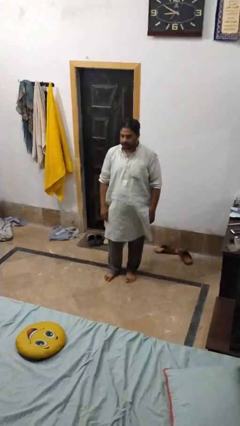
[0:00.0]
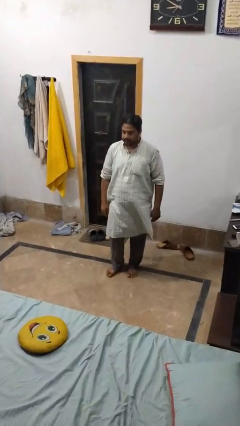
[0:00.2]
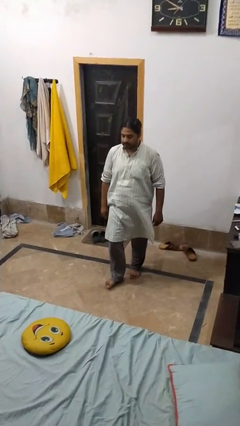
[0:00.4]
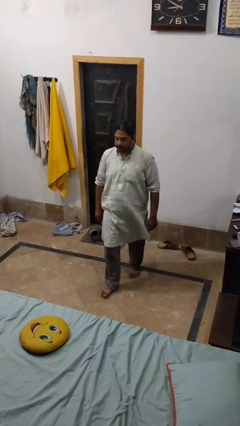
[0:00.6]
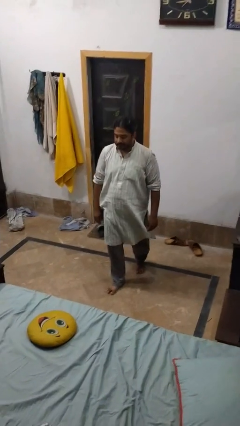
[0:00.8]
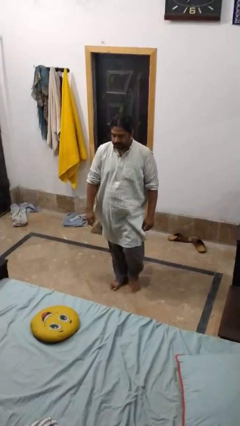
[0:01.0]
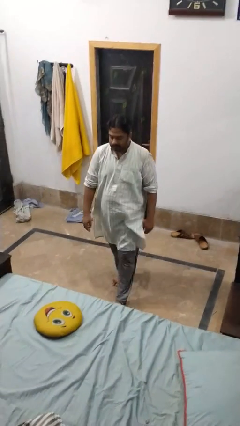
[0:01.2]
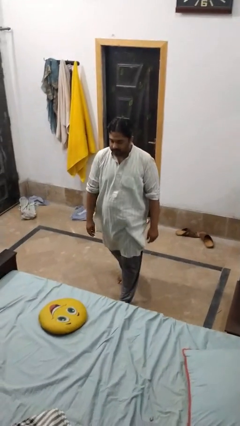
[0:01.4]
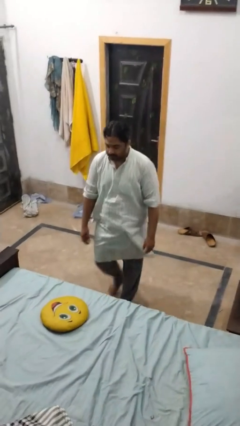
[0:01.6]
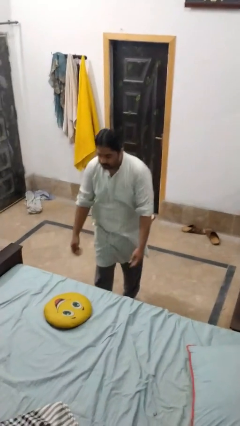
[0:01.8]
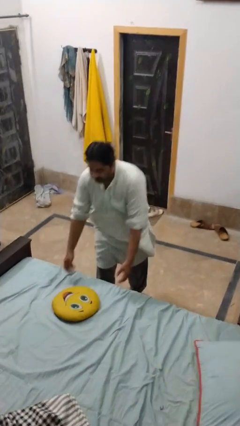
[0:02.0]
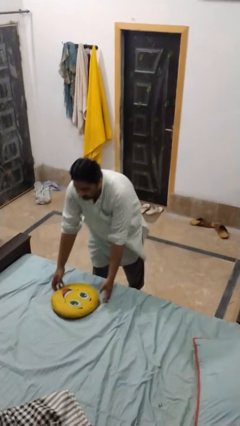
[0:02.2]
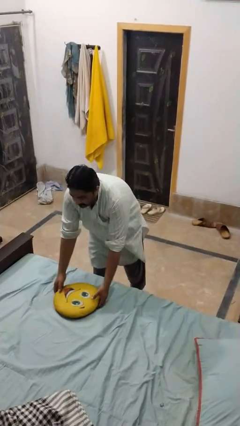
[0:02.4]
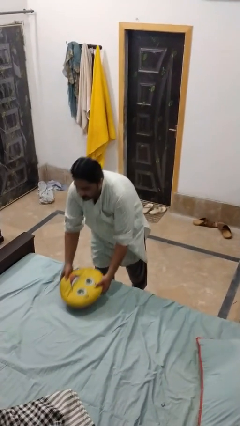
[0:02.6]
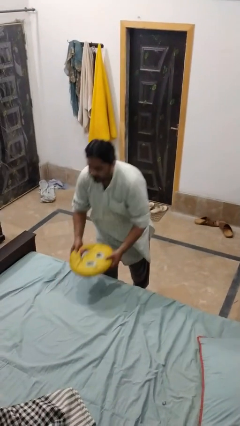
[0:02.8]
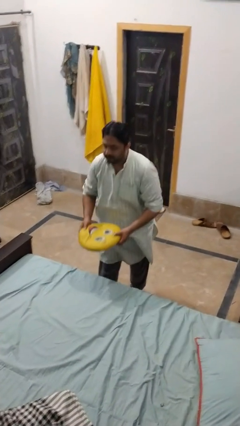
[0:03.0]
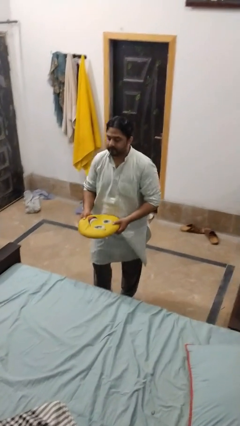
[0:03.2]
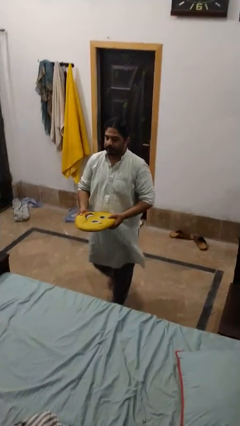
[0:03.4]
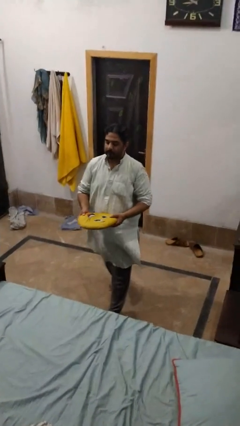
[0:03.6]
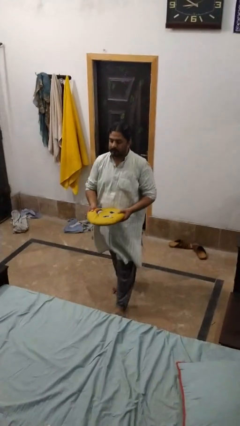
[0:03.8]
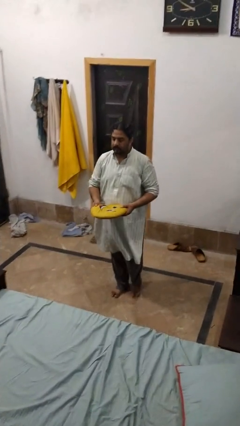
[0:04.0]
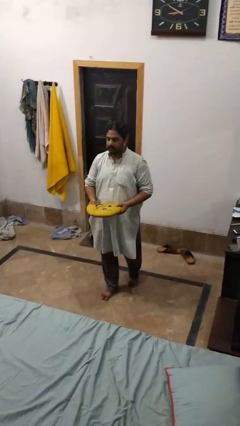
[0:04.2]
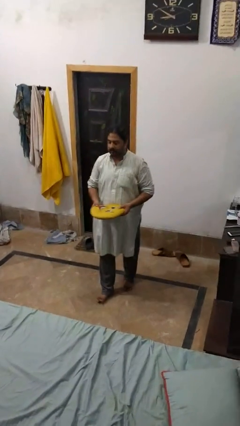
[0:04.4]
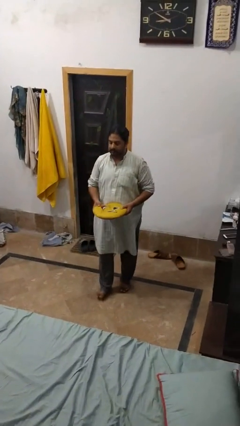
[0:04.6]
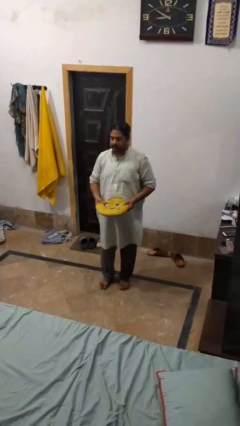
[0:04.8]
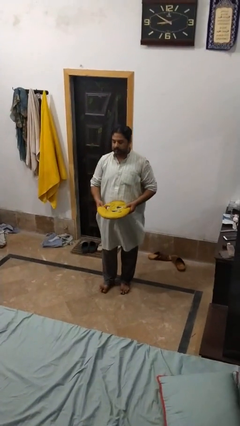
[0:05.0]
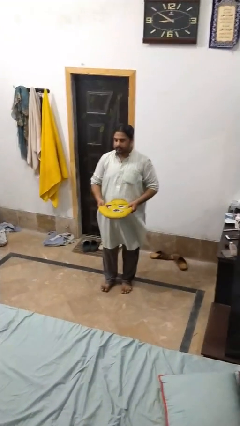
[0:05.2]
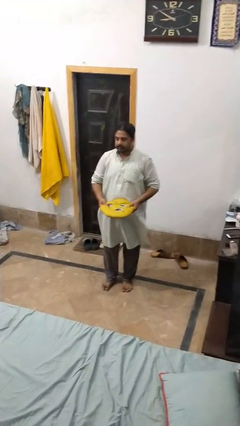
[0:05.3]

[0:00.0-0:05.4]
person picks up object from bed

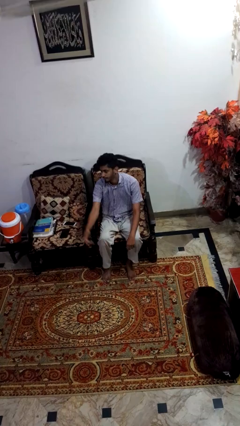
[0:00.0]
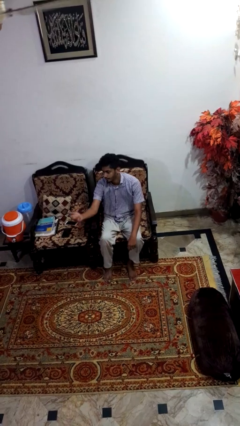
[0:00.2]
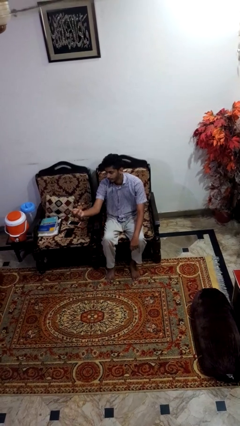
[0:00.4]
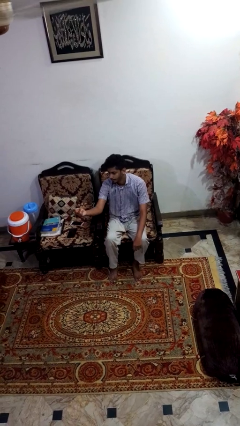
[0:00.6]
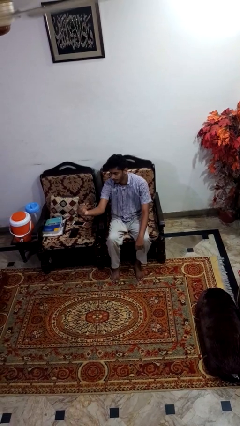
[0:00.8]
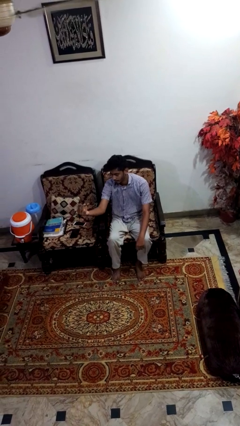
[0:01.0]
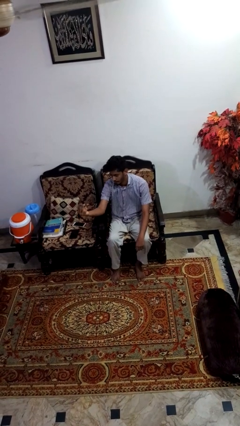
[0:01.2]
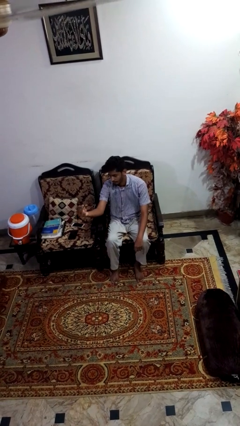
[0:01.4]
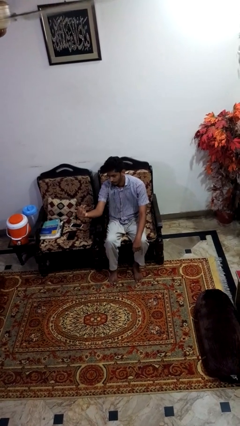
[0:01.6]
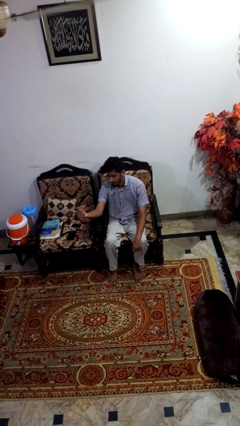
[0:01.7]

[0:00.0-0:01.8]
person gestures come here

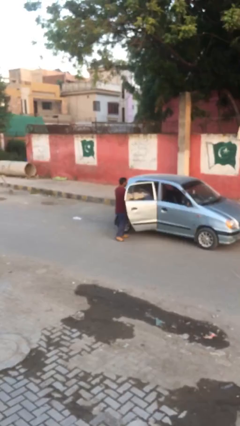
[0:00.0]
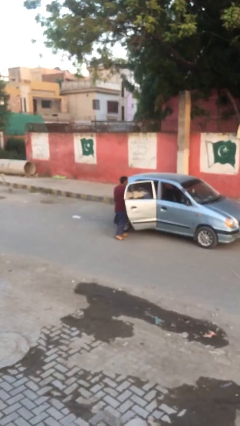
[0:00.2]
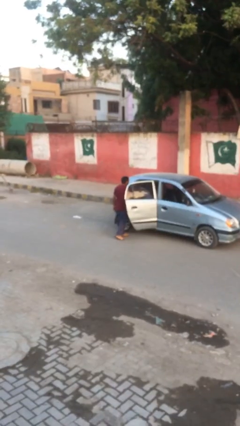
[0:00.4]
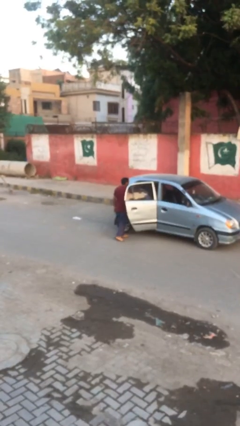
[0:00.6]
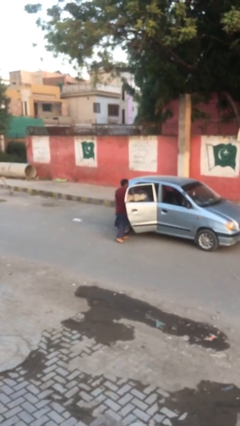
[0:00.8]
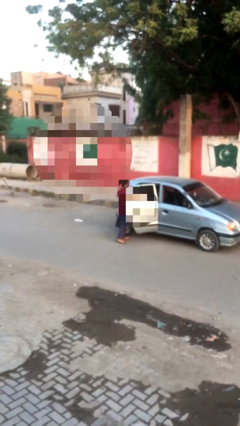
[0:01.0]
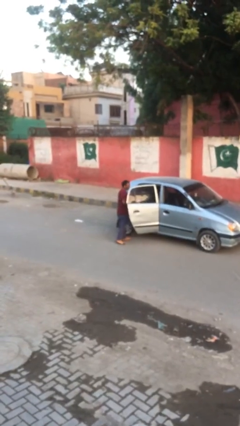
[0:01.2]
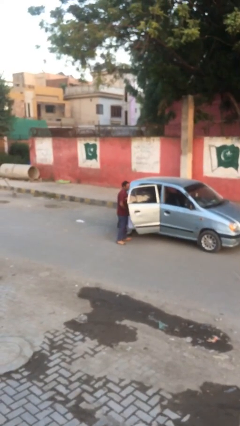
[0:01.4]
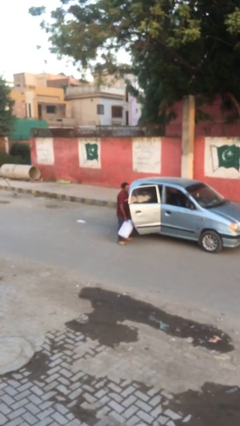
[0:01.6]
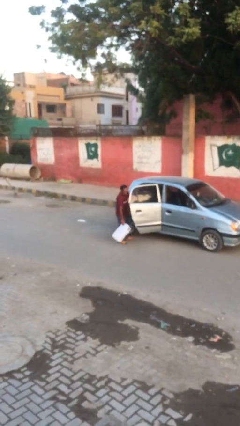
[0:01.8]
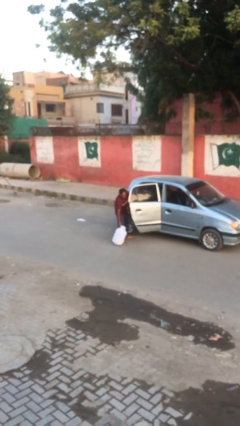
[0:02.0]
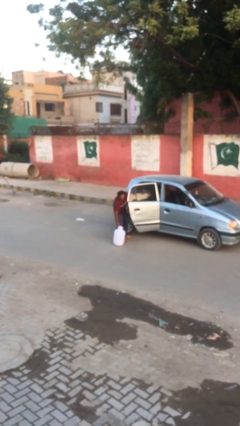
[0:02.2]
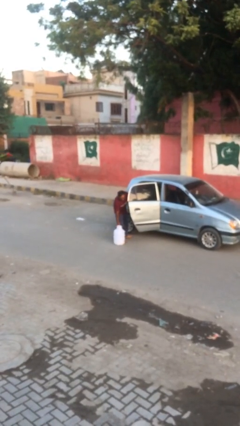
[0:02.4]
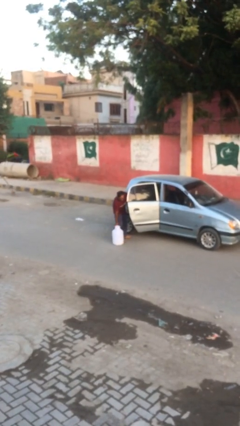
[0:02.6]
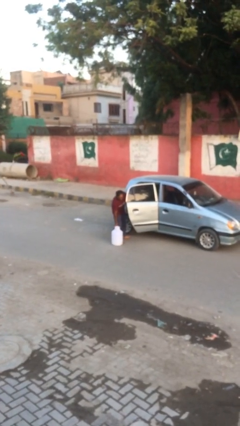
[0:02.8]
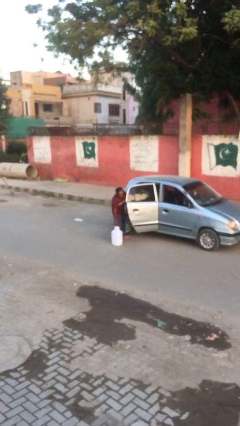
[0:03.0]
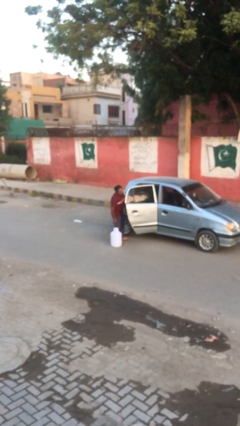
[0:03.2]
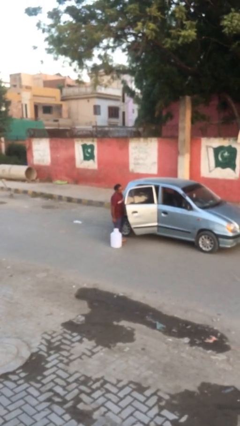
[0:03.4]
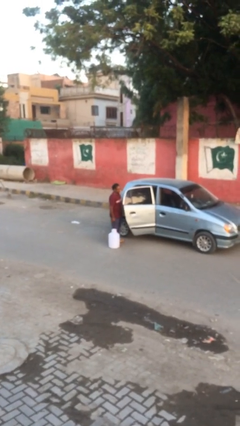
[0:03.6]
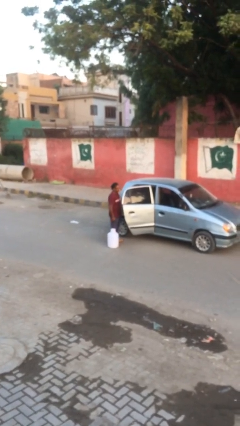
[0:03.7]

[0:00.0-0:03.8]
person unloads car

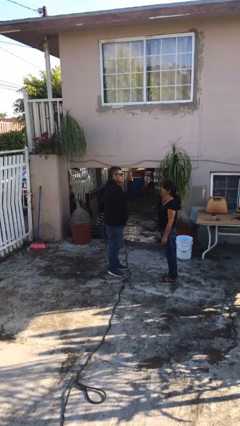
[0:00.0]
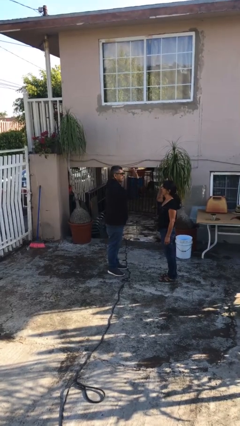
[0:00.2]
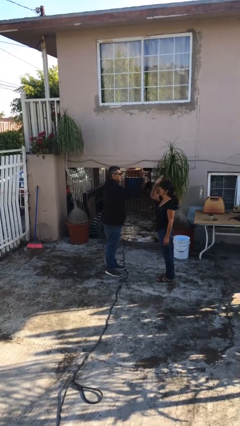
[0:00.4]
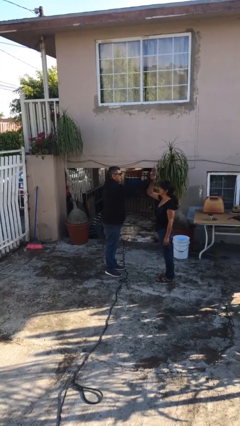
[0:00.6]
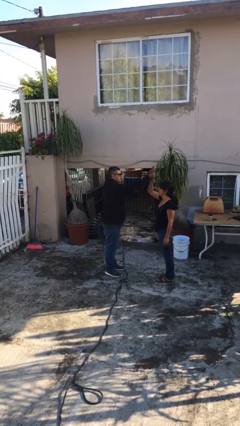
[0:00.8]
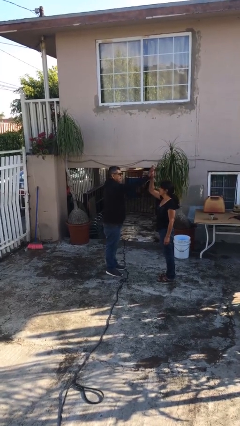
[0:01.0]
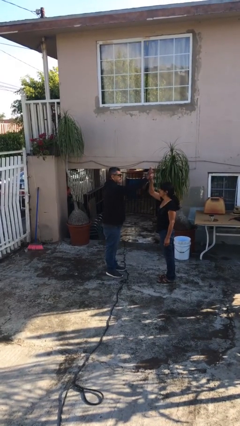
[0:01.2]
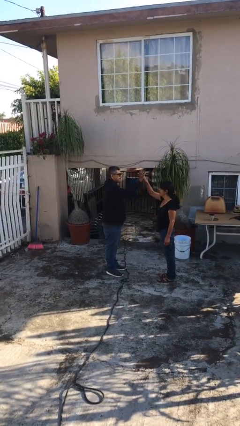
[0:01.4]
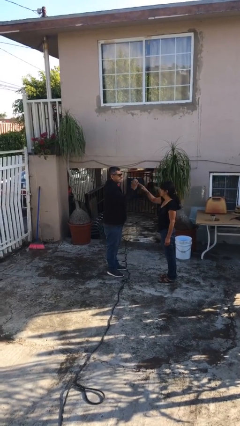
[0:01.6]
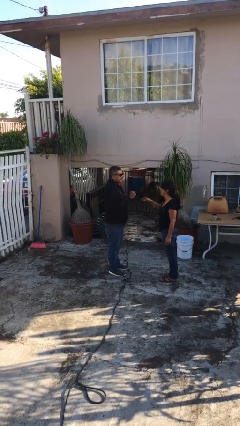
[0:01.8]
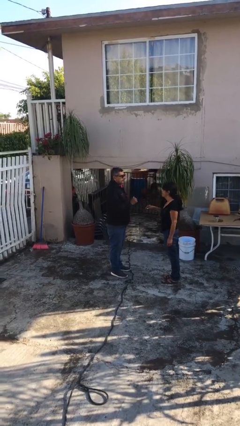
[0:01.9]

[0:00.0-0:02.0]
person highfives hand

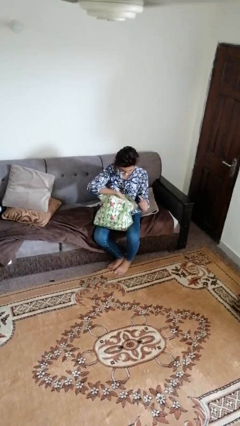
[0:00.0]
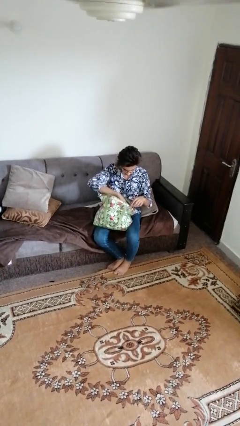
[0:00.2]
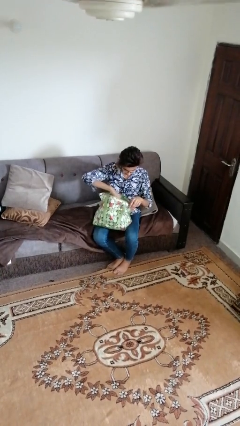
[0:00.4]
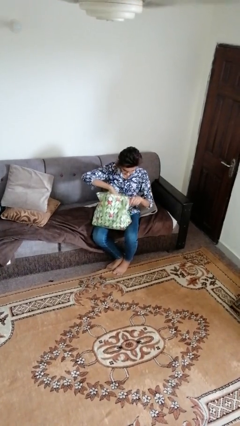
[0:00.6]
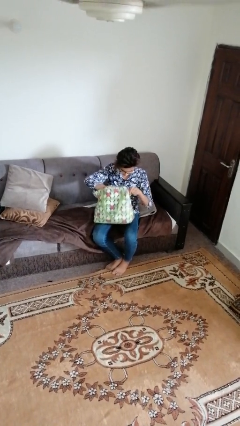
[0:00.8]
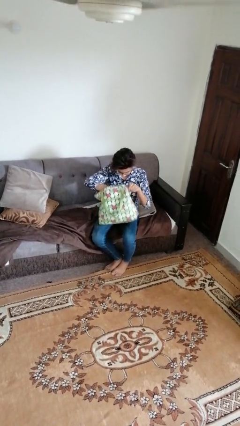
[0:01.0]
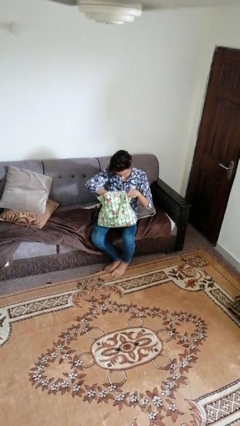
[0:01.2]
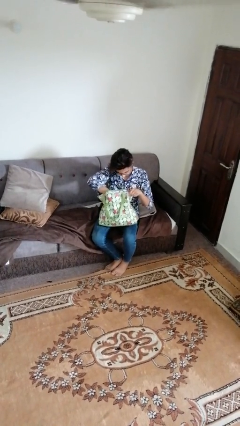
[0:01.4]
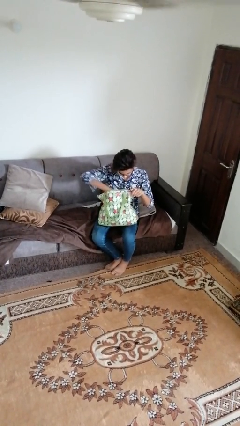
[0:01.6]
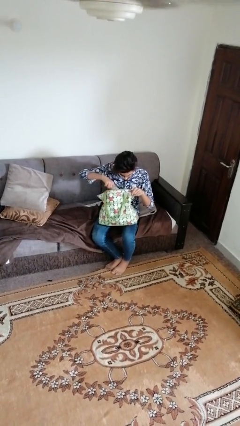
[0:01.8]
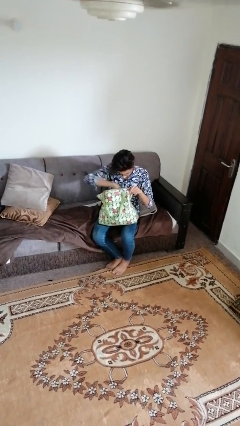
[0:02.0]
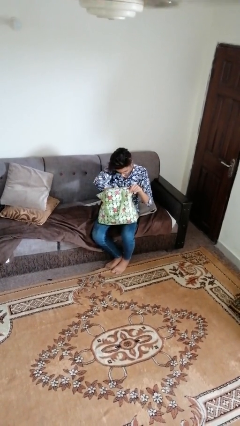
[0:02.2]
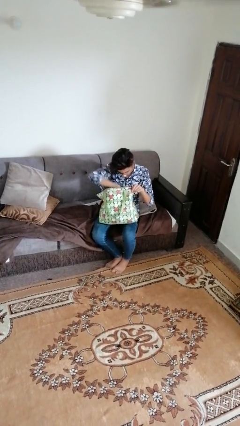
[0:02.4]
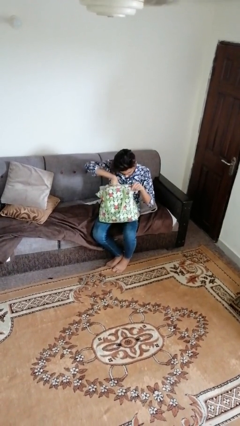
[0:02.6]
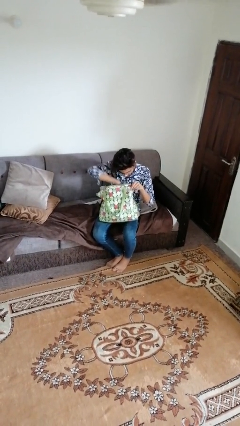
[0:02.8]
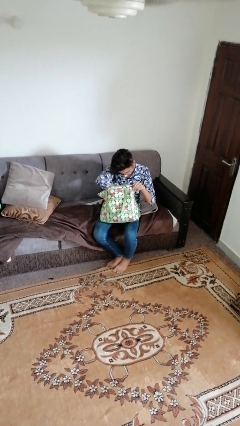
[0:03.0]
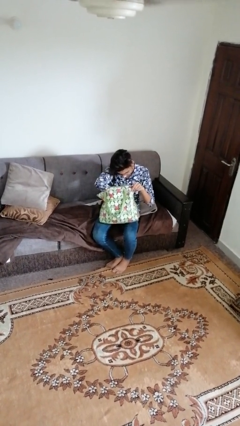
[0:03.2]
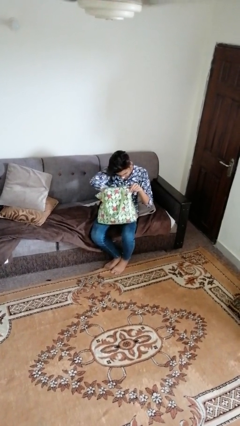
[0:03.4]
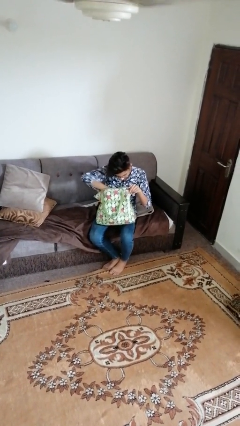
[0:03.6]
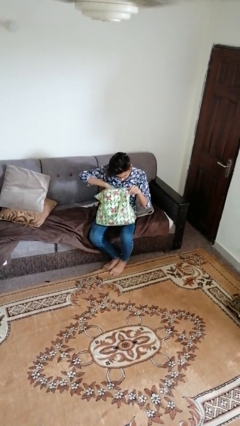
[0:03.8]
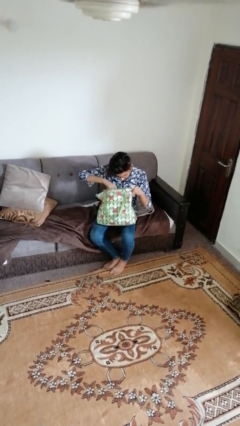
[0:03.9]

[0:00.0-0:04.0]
person searches in bag

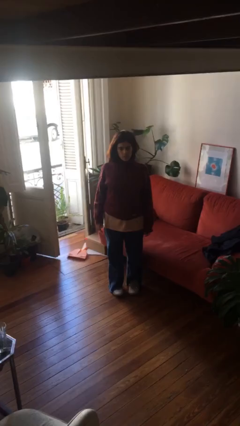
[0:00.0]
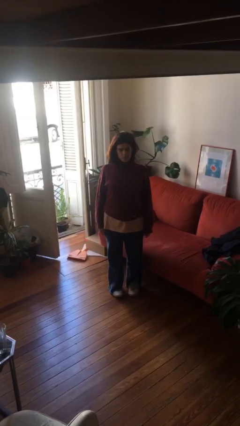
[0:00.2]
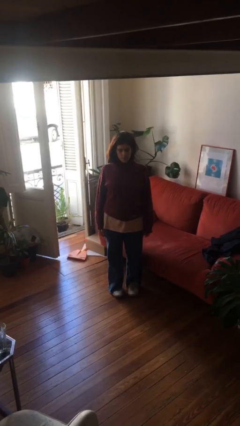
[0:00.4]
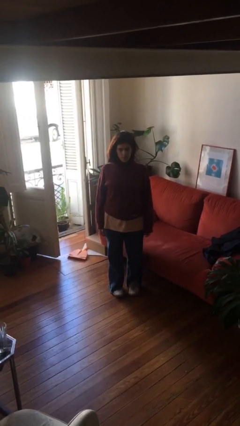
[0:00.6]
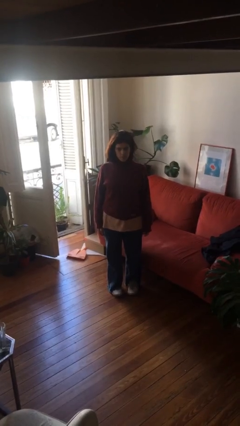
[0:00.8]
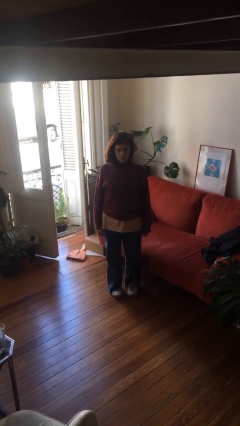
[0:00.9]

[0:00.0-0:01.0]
person gestures lower hand
